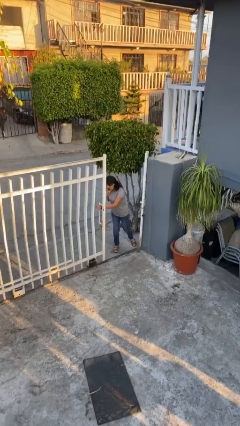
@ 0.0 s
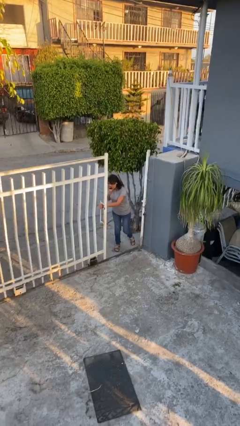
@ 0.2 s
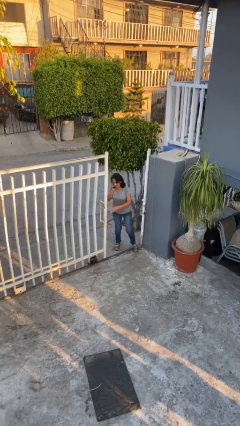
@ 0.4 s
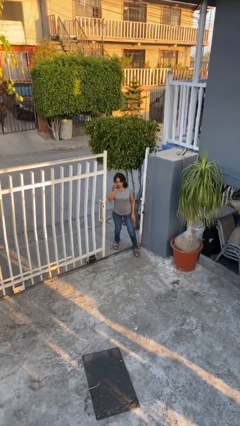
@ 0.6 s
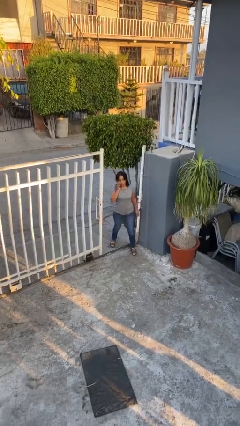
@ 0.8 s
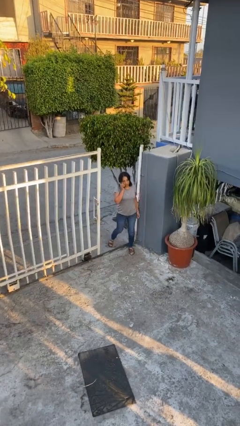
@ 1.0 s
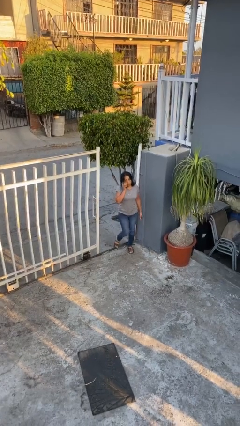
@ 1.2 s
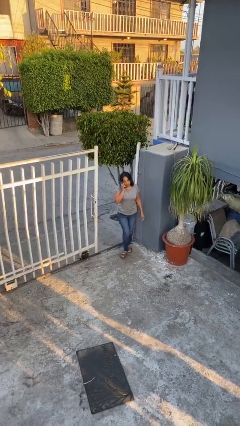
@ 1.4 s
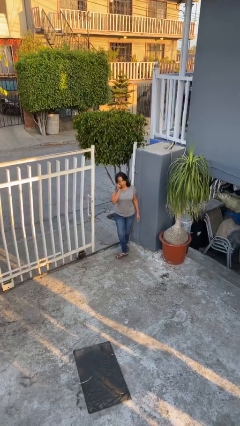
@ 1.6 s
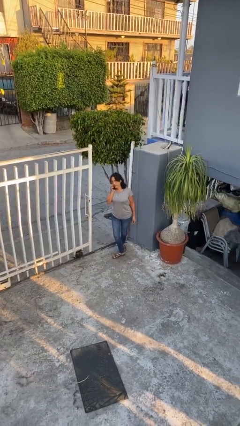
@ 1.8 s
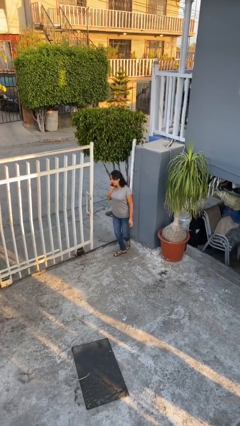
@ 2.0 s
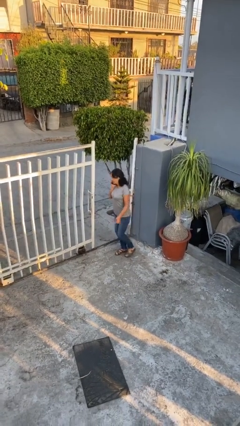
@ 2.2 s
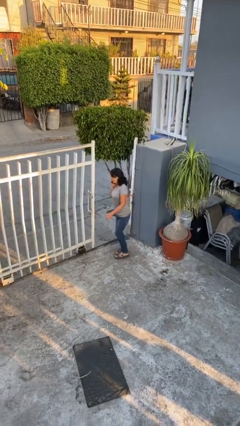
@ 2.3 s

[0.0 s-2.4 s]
person enters scene through structure

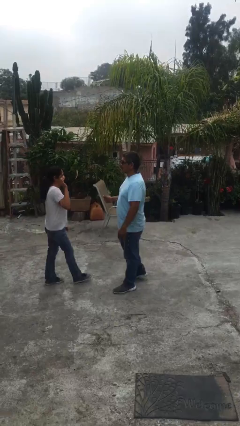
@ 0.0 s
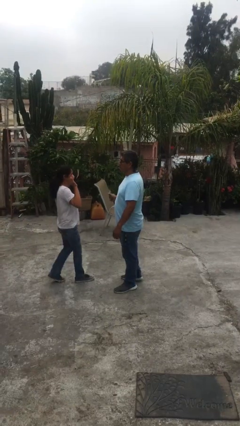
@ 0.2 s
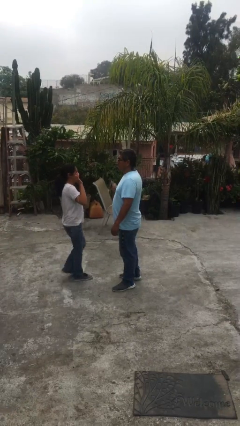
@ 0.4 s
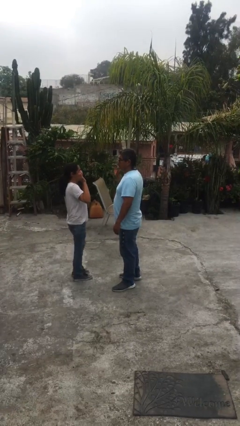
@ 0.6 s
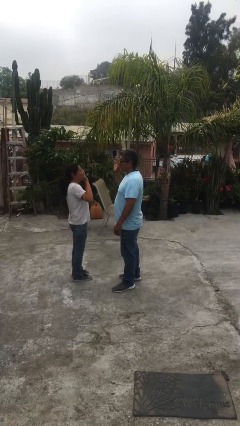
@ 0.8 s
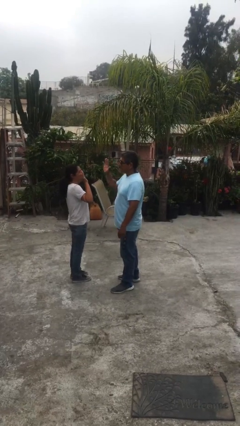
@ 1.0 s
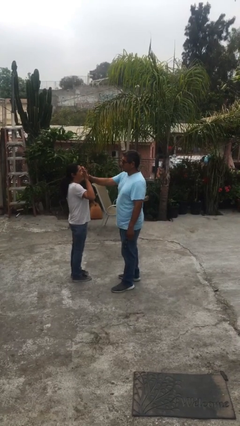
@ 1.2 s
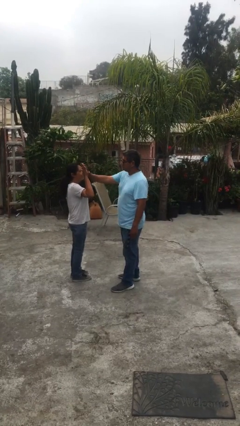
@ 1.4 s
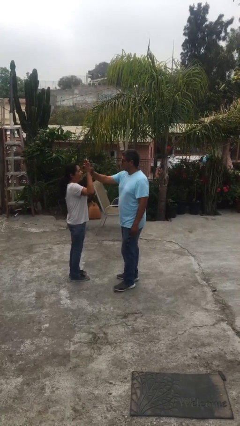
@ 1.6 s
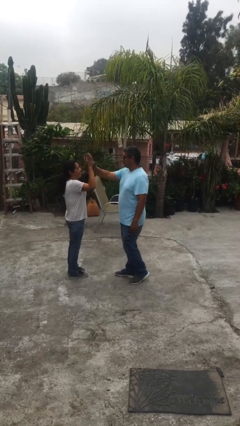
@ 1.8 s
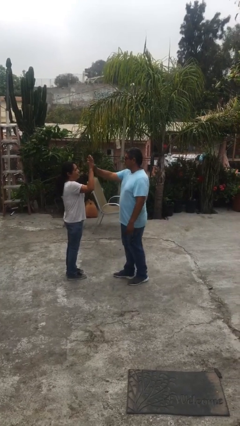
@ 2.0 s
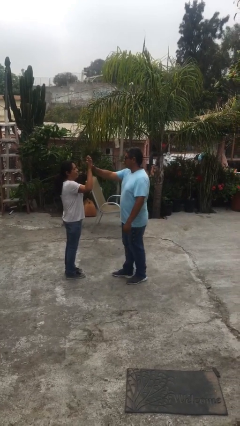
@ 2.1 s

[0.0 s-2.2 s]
person highfives hand

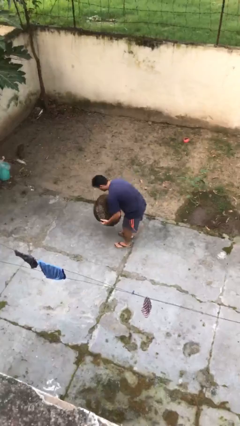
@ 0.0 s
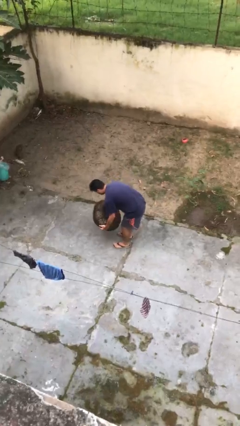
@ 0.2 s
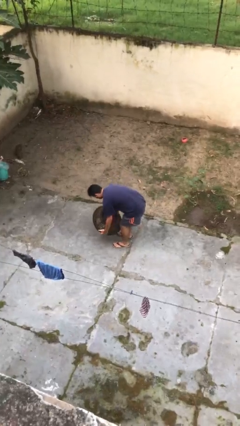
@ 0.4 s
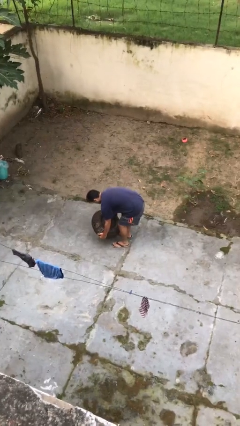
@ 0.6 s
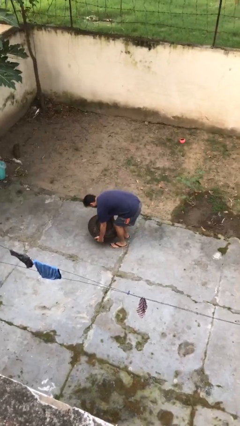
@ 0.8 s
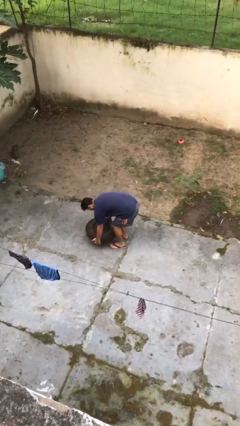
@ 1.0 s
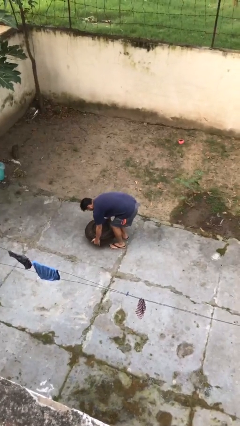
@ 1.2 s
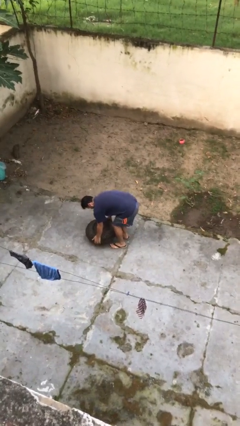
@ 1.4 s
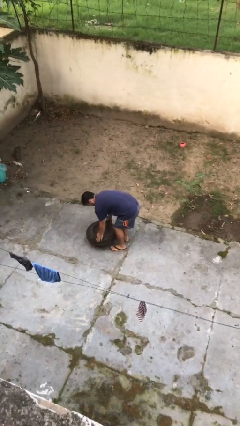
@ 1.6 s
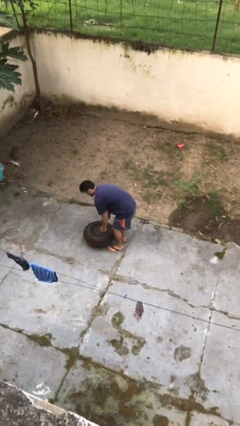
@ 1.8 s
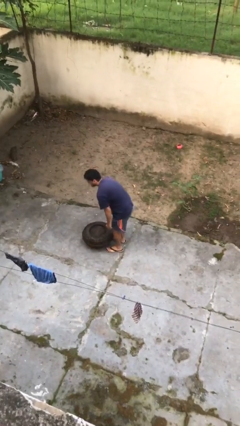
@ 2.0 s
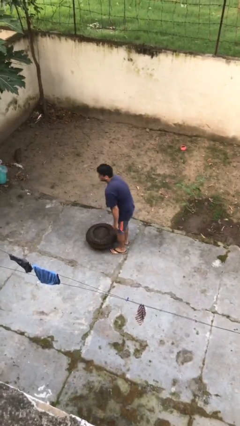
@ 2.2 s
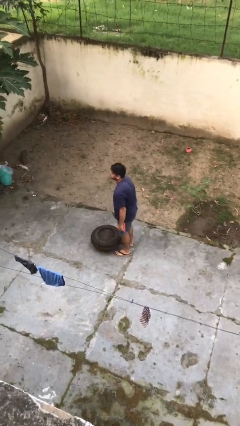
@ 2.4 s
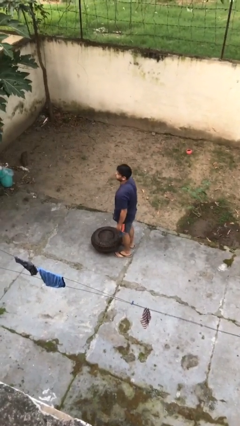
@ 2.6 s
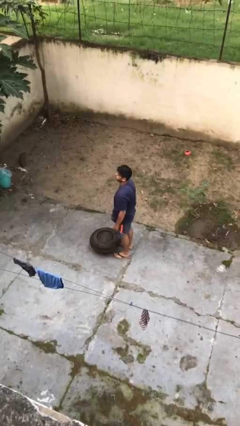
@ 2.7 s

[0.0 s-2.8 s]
person puts down object on floor

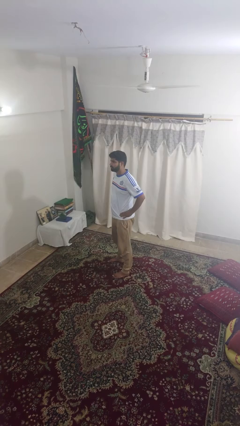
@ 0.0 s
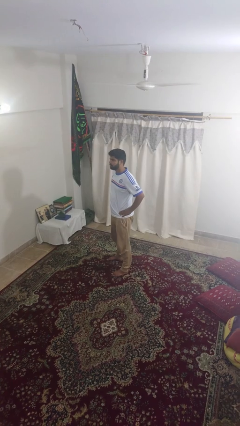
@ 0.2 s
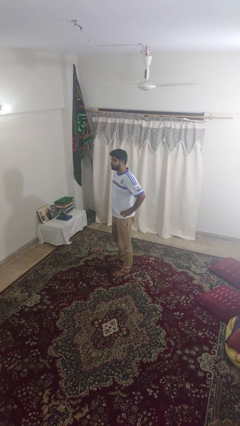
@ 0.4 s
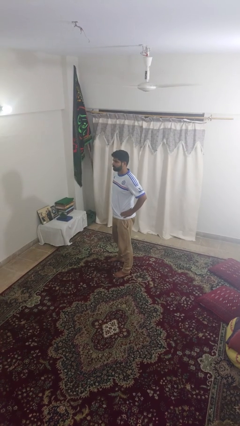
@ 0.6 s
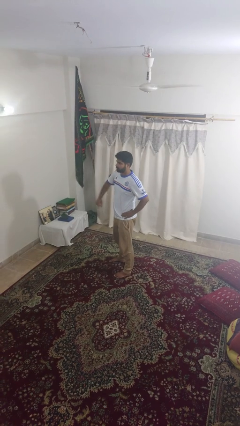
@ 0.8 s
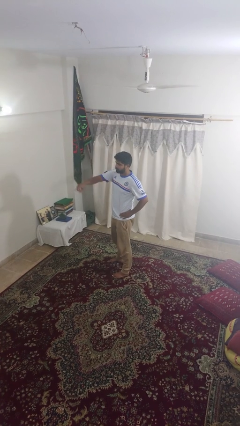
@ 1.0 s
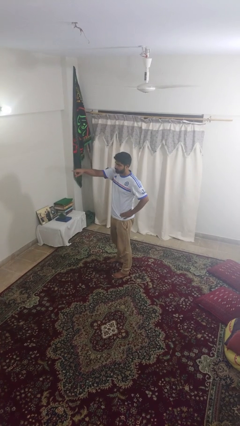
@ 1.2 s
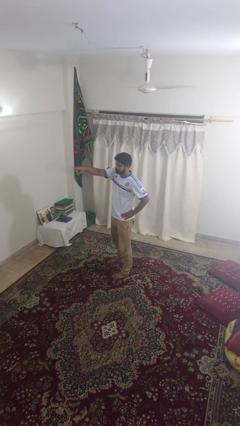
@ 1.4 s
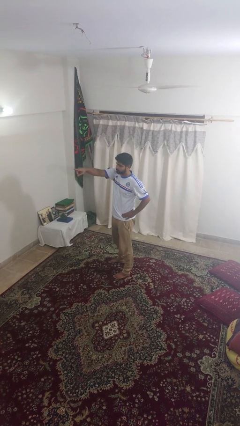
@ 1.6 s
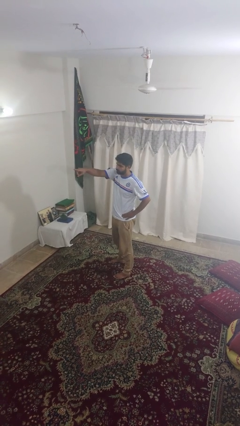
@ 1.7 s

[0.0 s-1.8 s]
person points at person

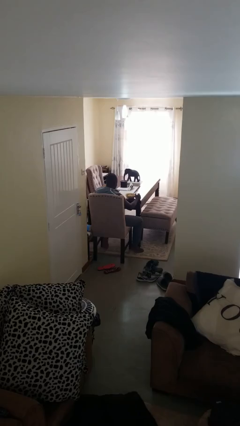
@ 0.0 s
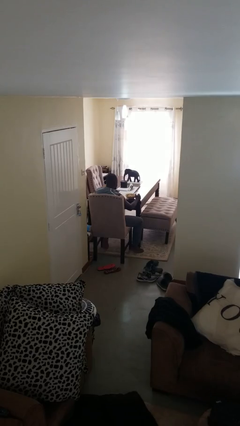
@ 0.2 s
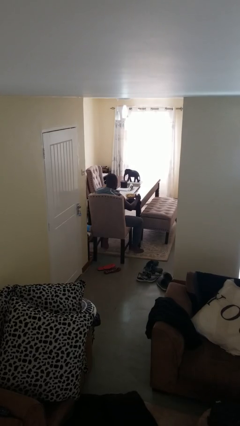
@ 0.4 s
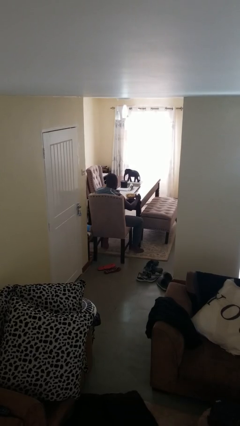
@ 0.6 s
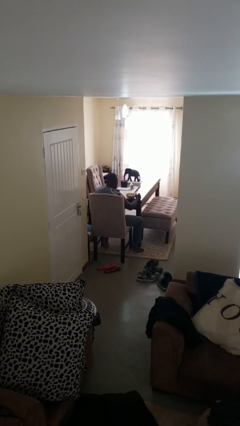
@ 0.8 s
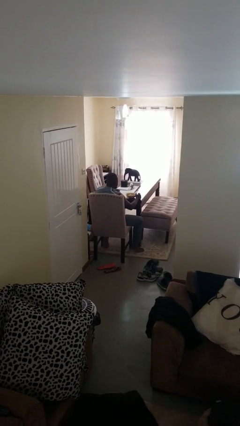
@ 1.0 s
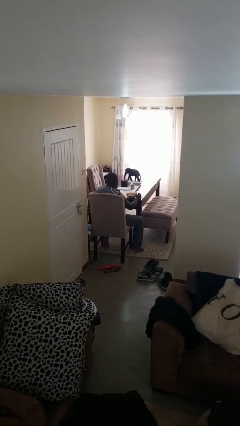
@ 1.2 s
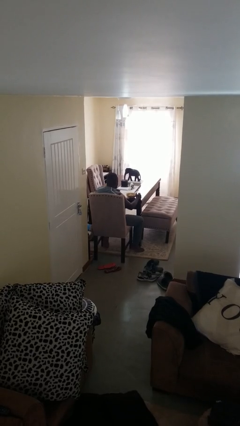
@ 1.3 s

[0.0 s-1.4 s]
person eats with hands

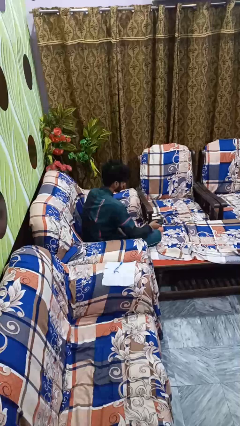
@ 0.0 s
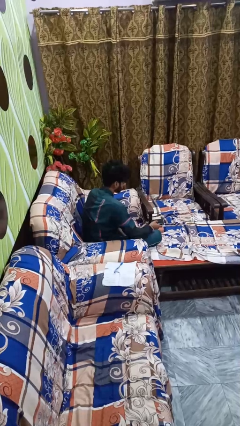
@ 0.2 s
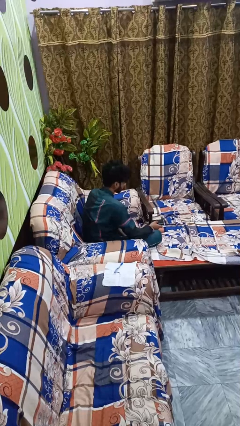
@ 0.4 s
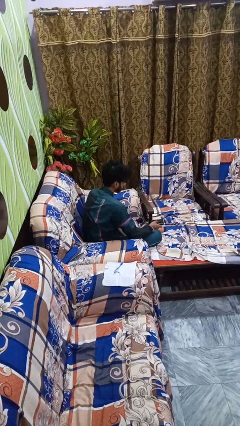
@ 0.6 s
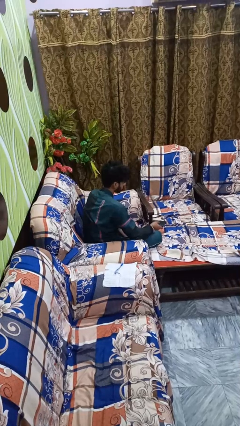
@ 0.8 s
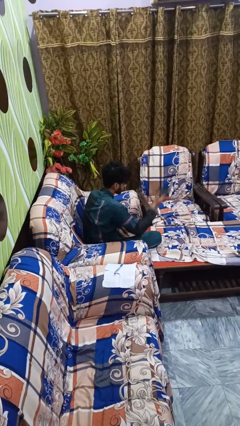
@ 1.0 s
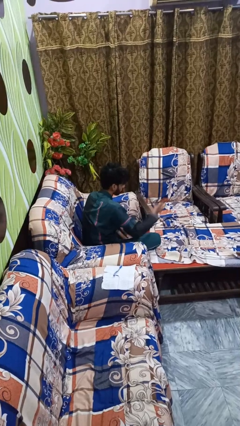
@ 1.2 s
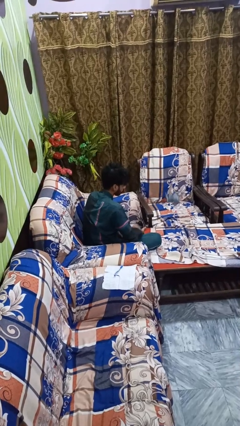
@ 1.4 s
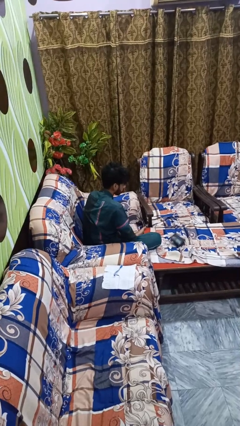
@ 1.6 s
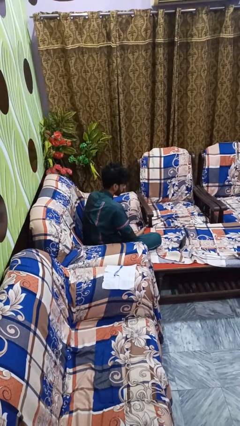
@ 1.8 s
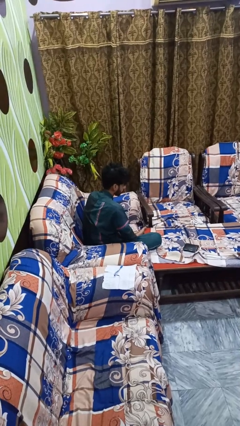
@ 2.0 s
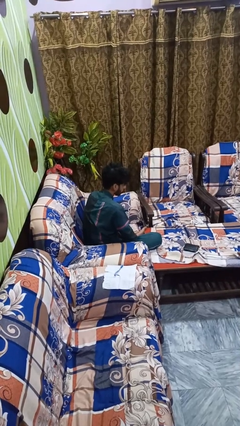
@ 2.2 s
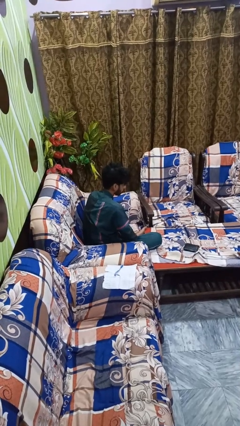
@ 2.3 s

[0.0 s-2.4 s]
person throws object into air

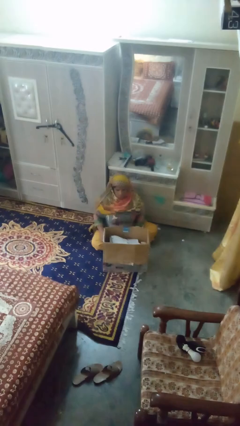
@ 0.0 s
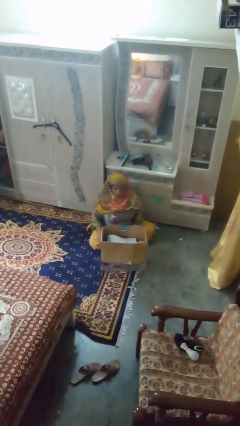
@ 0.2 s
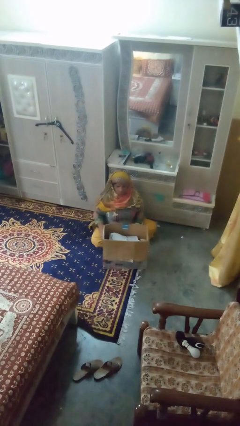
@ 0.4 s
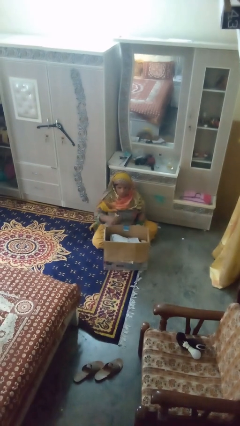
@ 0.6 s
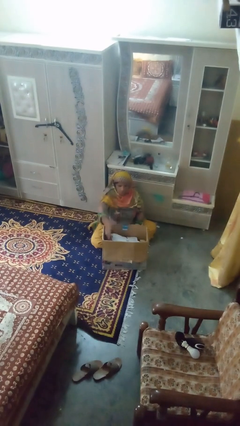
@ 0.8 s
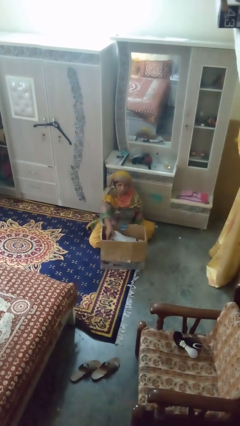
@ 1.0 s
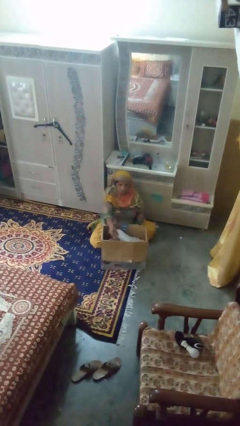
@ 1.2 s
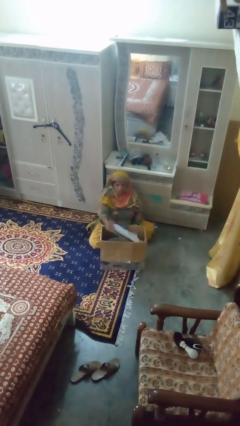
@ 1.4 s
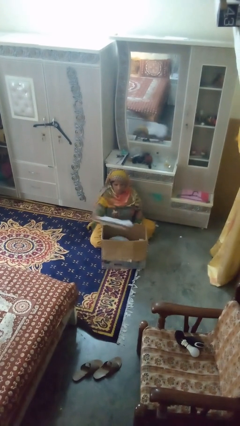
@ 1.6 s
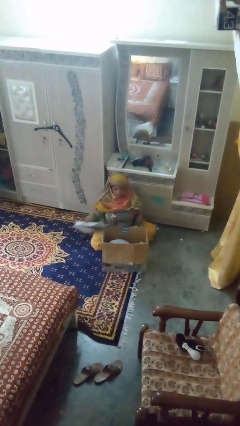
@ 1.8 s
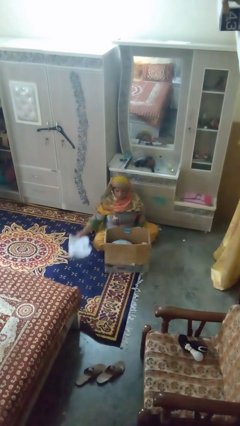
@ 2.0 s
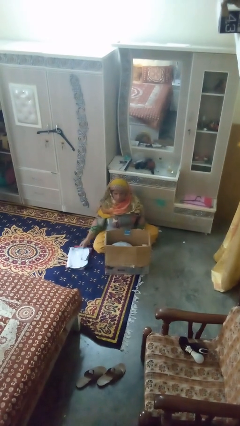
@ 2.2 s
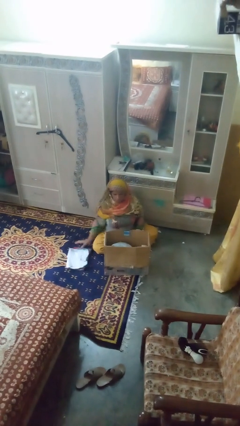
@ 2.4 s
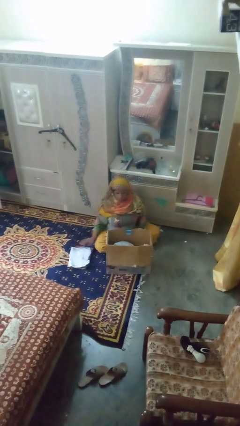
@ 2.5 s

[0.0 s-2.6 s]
person takes object from box

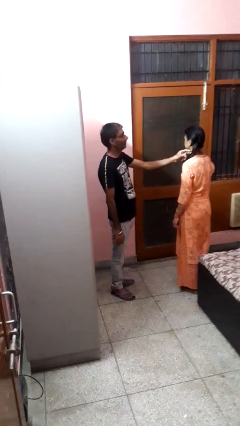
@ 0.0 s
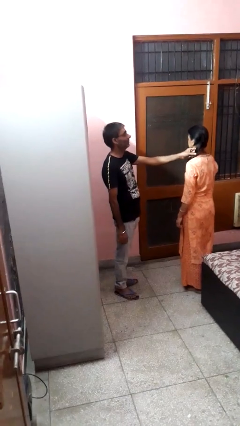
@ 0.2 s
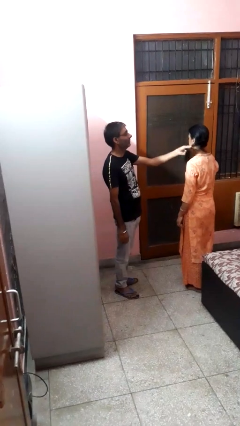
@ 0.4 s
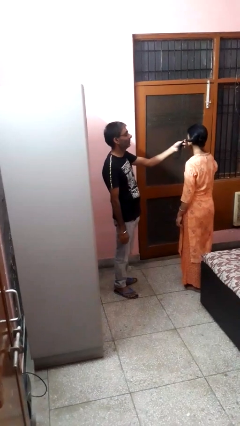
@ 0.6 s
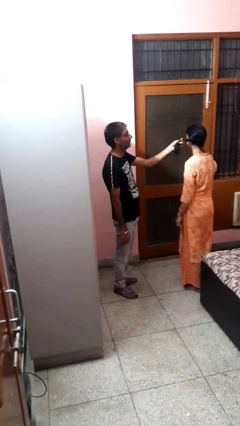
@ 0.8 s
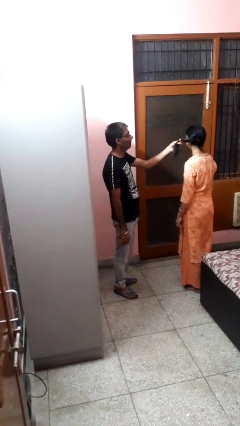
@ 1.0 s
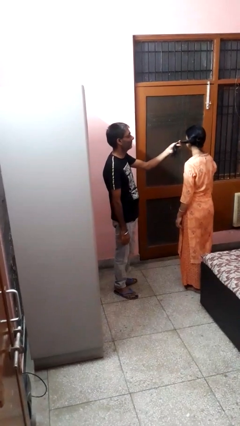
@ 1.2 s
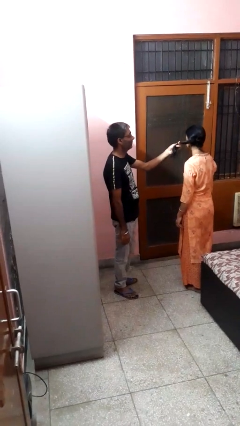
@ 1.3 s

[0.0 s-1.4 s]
person grabs person by hair

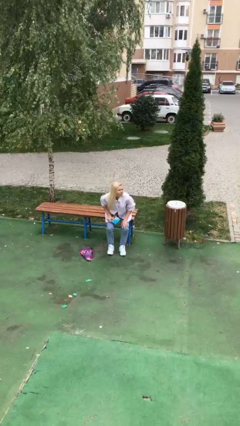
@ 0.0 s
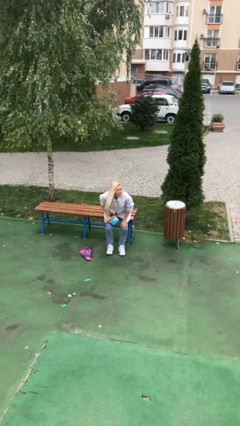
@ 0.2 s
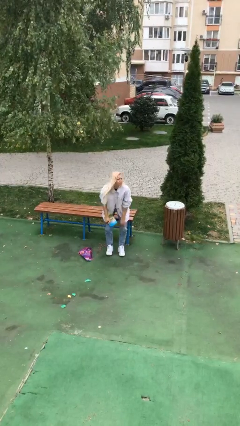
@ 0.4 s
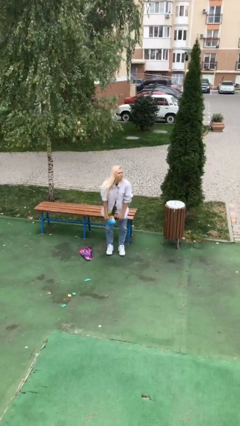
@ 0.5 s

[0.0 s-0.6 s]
person stands up
